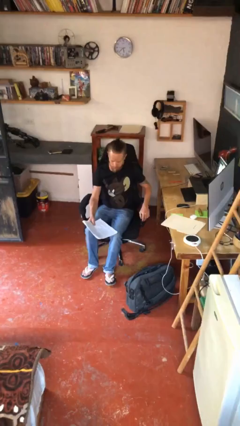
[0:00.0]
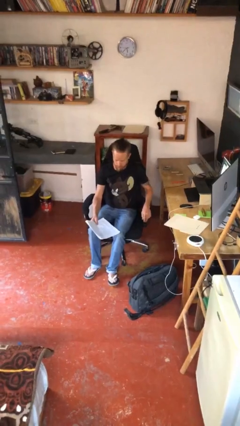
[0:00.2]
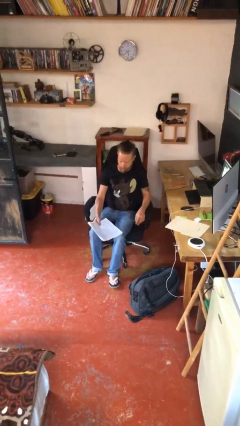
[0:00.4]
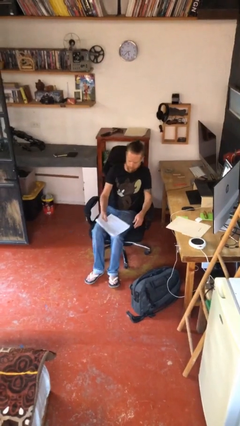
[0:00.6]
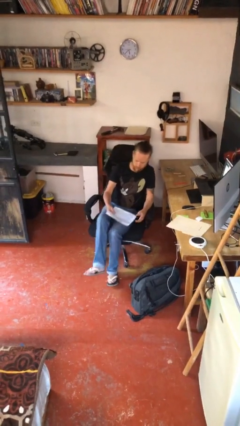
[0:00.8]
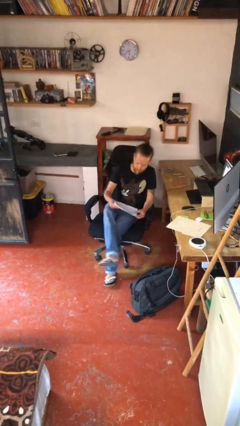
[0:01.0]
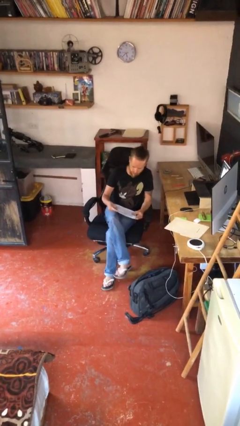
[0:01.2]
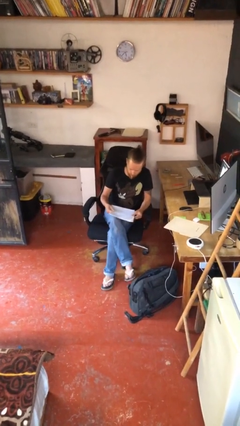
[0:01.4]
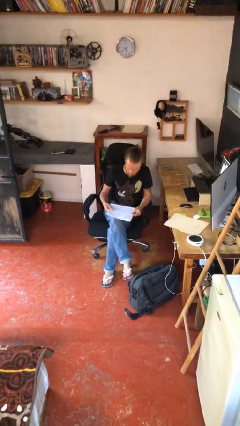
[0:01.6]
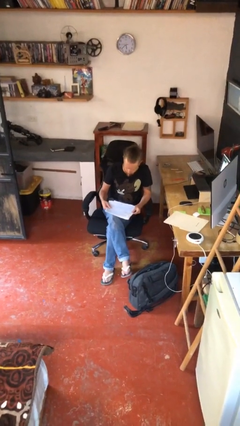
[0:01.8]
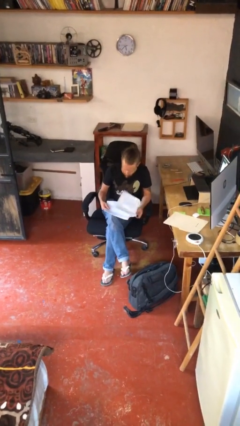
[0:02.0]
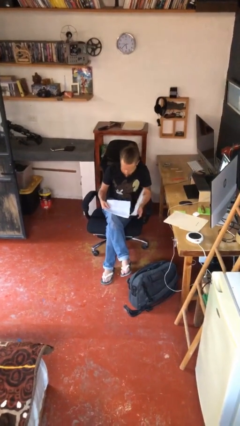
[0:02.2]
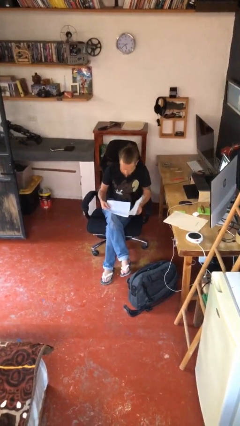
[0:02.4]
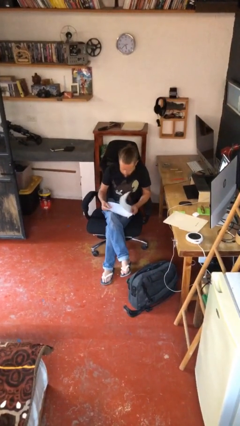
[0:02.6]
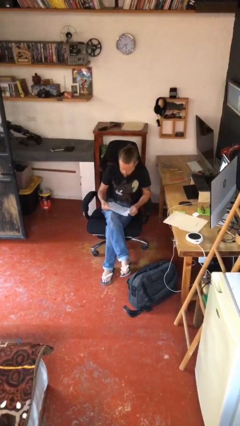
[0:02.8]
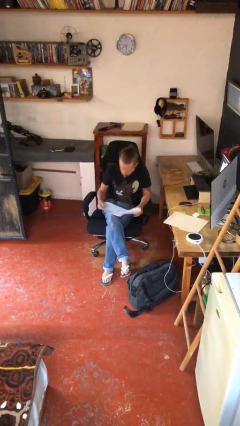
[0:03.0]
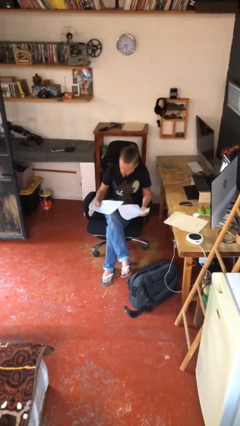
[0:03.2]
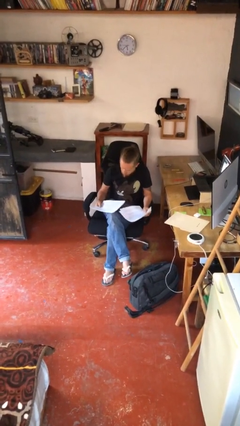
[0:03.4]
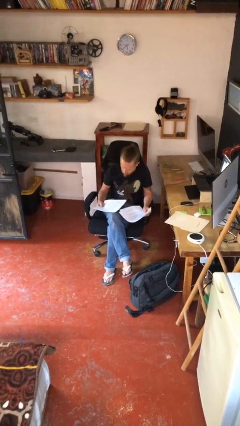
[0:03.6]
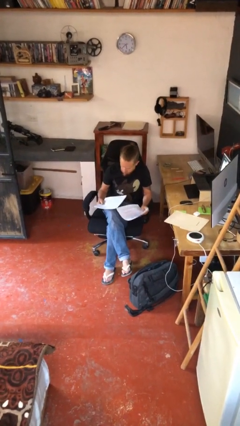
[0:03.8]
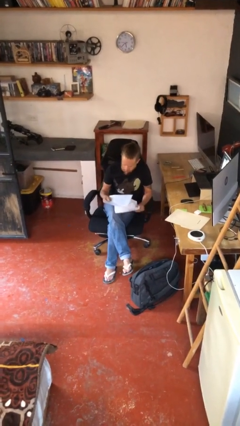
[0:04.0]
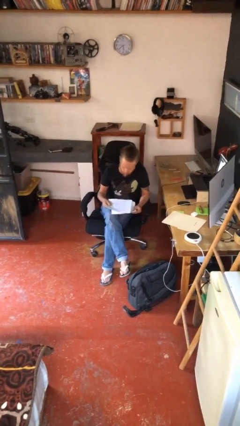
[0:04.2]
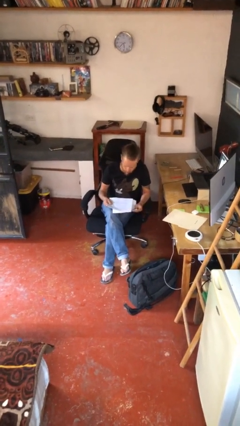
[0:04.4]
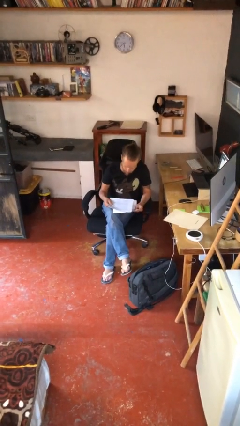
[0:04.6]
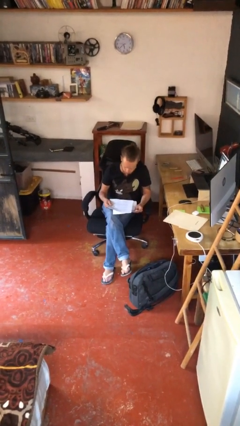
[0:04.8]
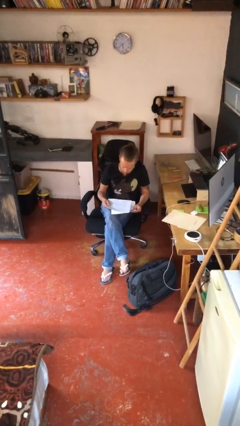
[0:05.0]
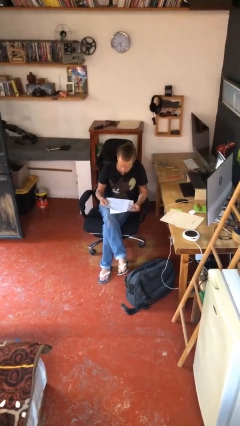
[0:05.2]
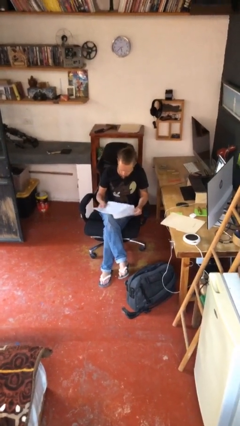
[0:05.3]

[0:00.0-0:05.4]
person reads document

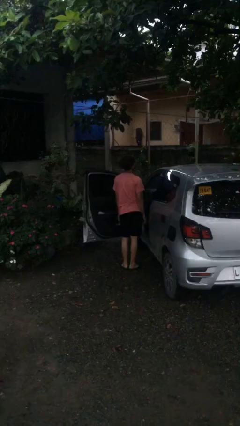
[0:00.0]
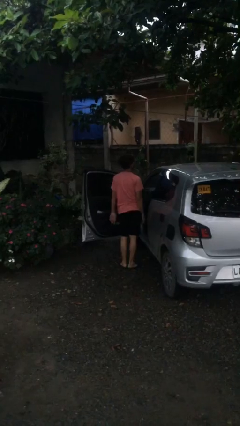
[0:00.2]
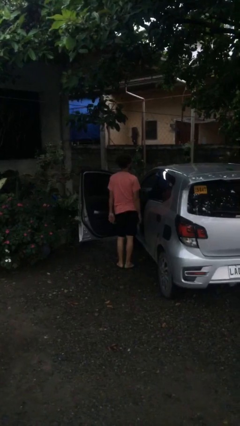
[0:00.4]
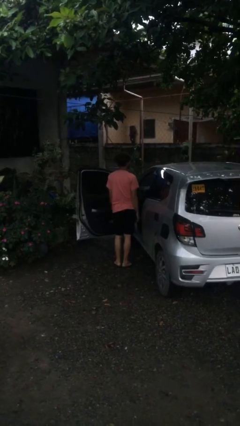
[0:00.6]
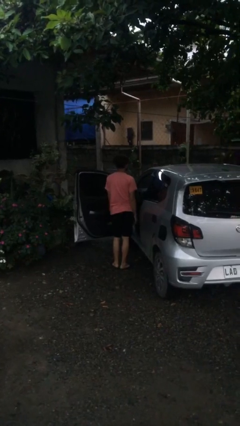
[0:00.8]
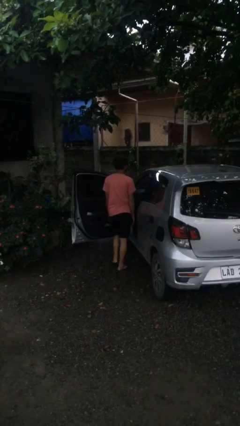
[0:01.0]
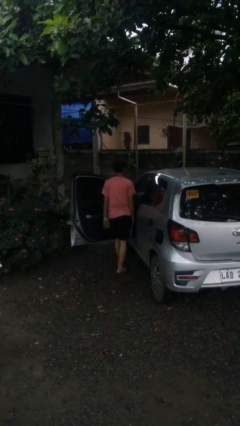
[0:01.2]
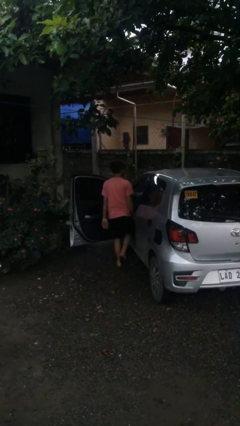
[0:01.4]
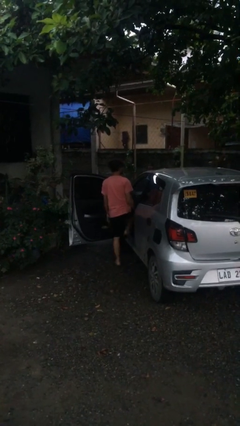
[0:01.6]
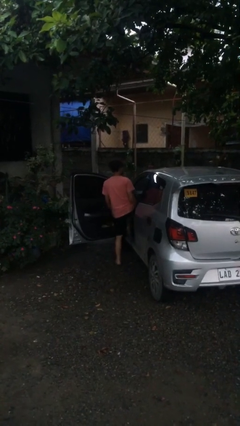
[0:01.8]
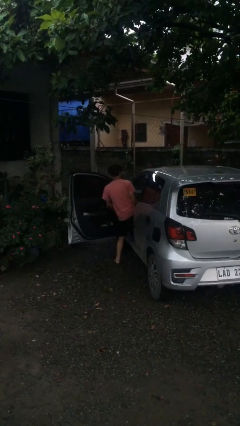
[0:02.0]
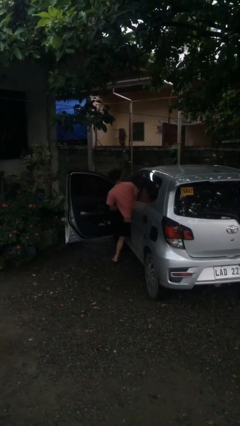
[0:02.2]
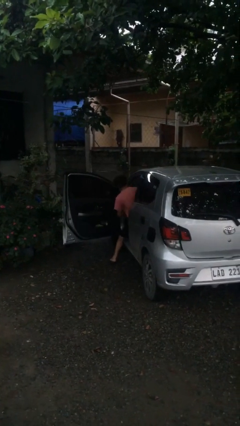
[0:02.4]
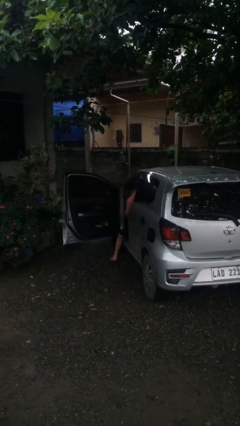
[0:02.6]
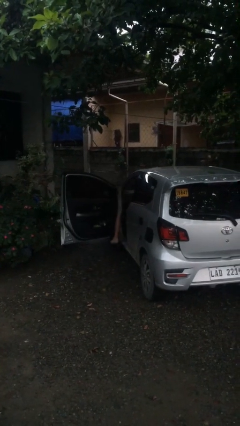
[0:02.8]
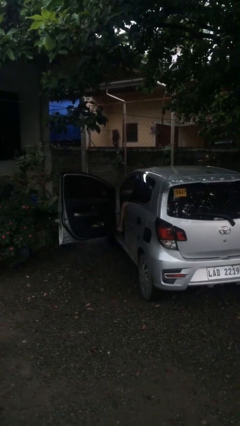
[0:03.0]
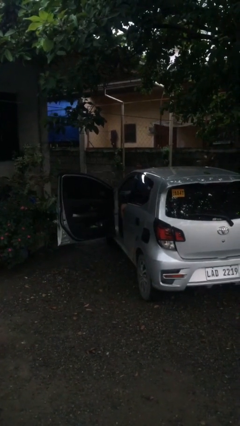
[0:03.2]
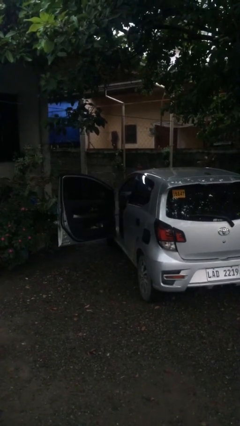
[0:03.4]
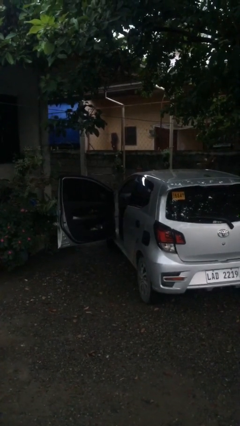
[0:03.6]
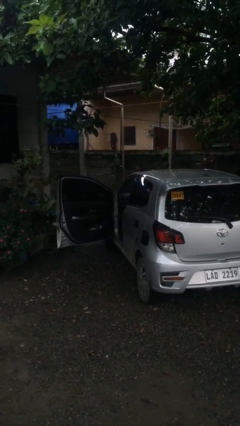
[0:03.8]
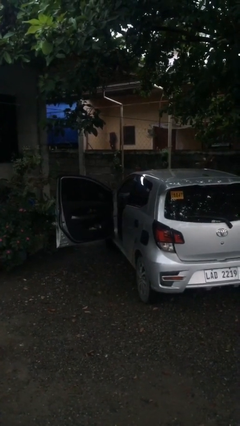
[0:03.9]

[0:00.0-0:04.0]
person enters car

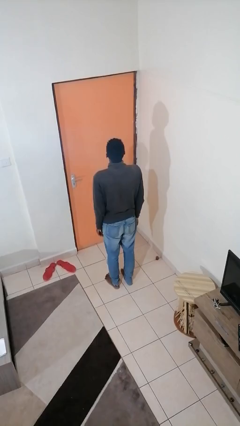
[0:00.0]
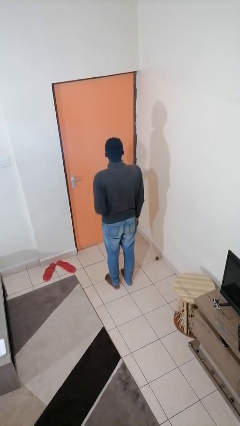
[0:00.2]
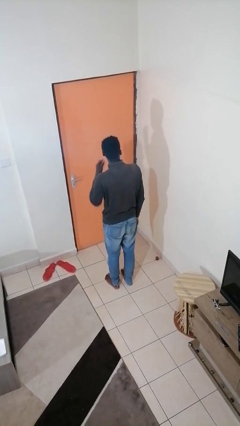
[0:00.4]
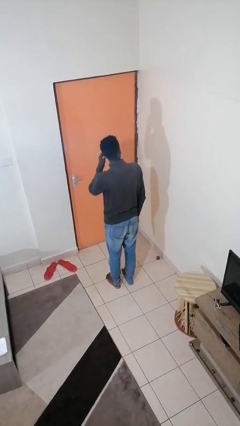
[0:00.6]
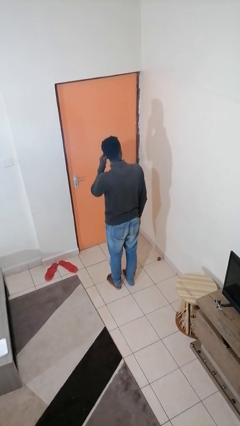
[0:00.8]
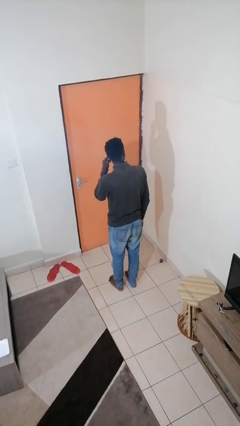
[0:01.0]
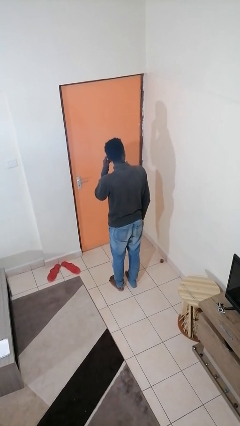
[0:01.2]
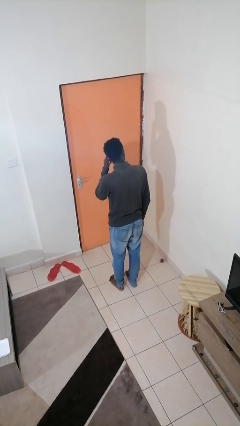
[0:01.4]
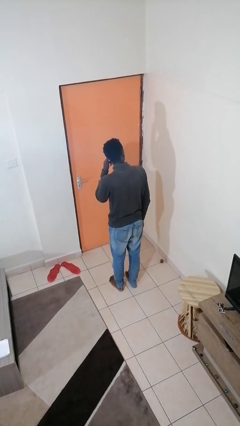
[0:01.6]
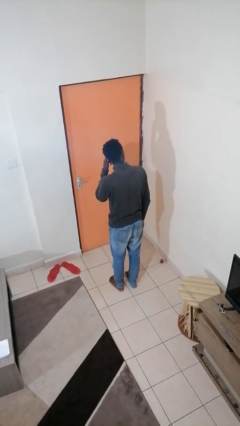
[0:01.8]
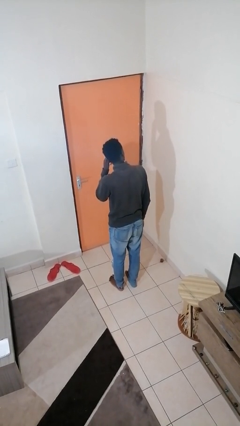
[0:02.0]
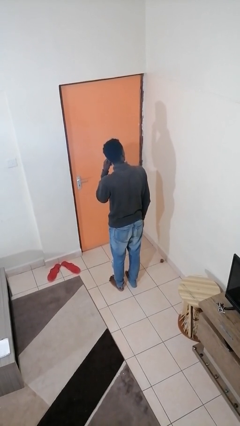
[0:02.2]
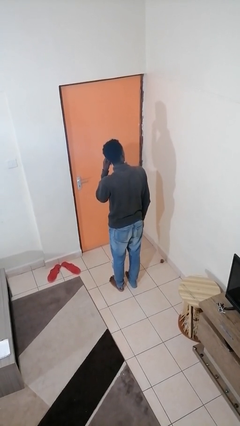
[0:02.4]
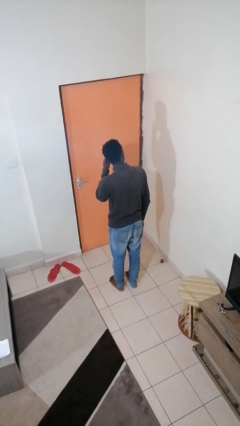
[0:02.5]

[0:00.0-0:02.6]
person touches earlobe

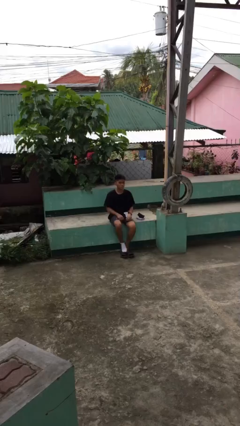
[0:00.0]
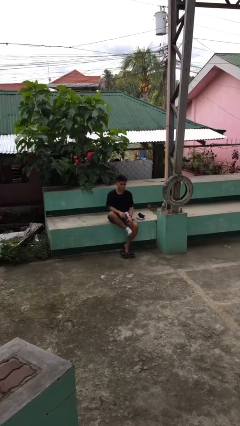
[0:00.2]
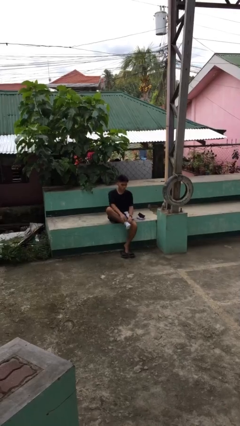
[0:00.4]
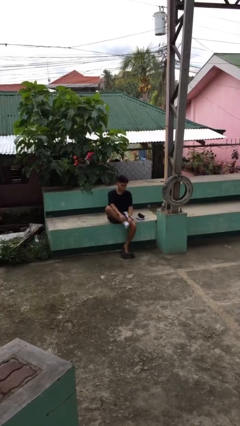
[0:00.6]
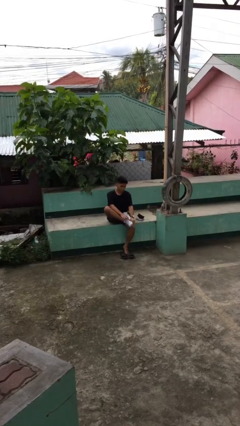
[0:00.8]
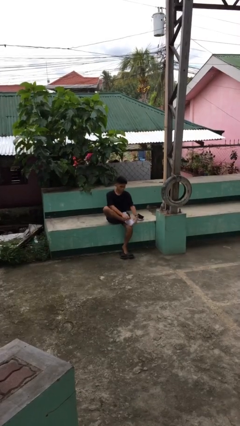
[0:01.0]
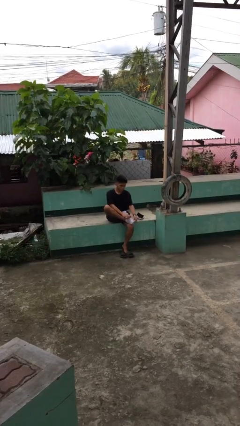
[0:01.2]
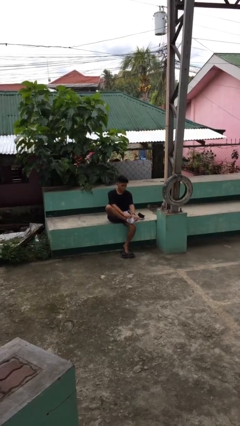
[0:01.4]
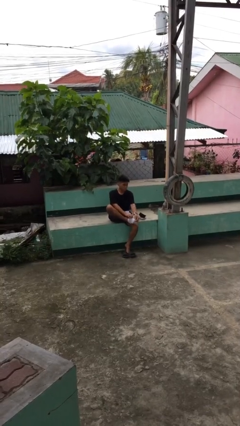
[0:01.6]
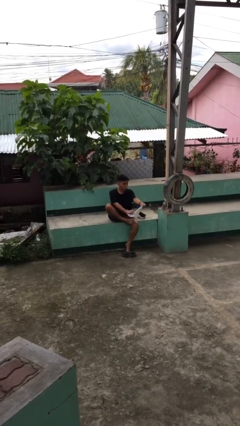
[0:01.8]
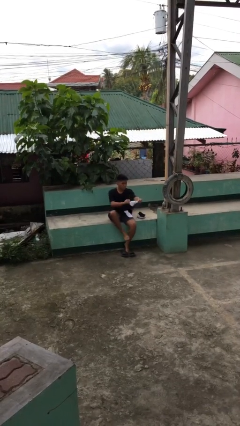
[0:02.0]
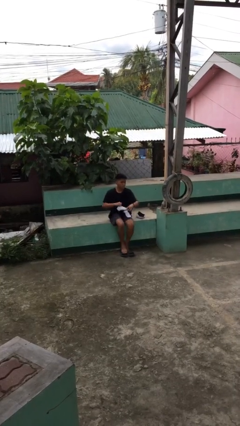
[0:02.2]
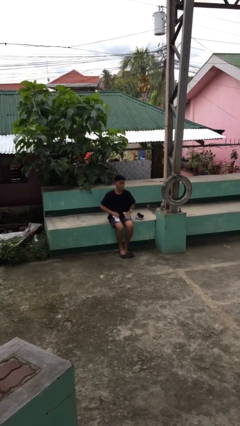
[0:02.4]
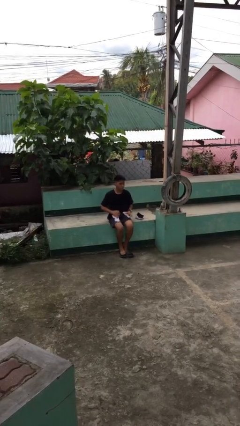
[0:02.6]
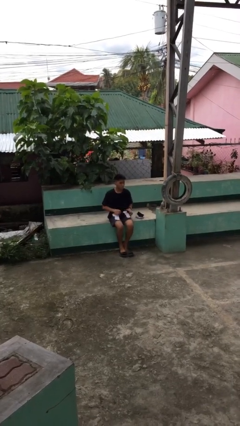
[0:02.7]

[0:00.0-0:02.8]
person takes off socks

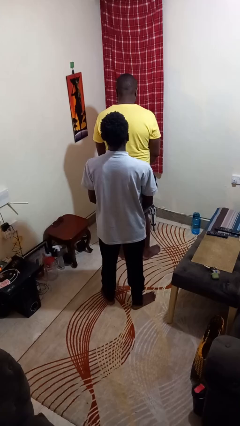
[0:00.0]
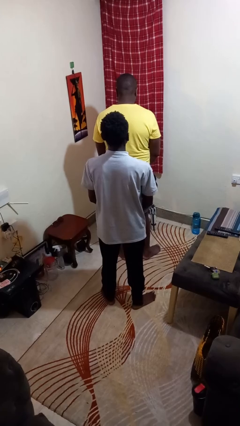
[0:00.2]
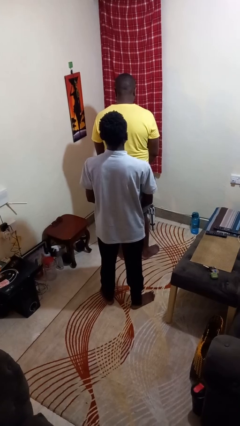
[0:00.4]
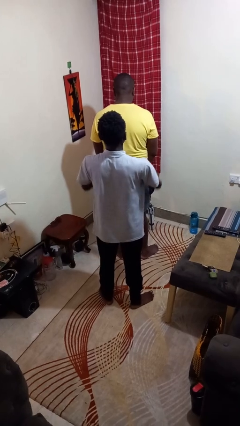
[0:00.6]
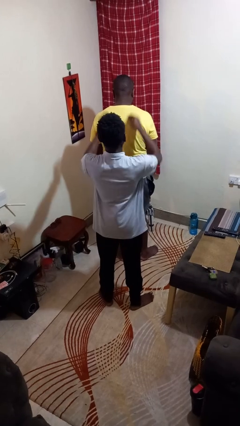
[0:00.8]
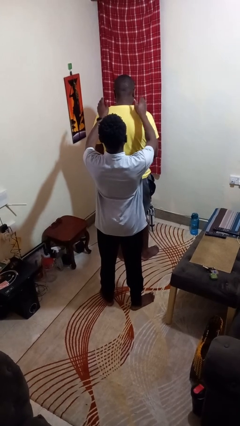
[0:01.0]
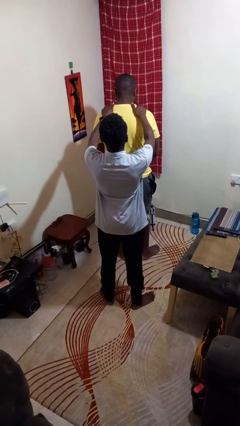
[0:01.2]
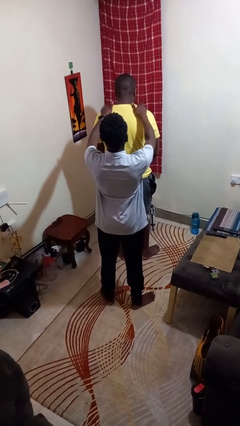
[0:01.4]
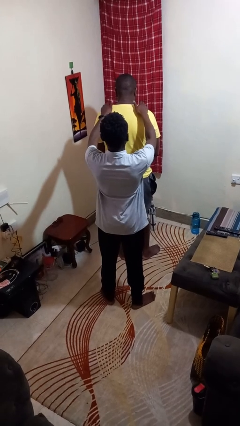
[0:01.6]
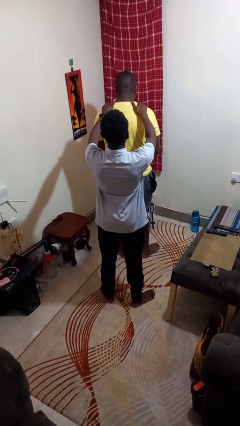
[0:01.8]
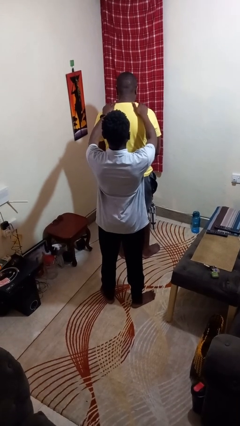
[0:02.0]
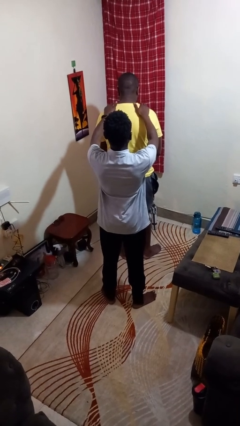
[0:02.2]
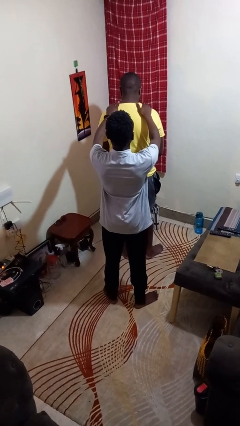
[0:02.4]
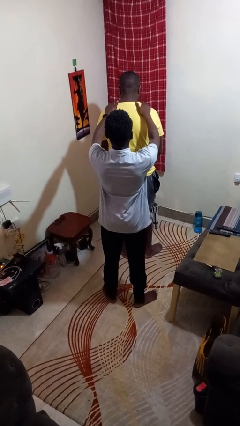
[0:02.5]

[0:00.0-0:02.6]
person pounds shoulders of person

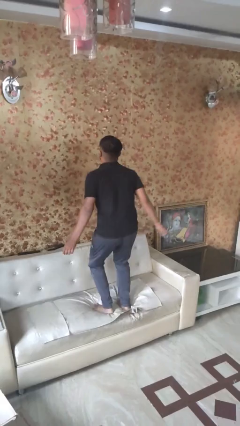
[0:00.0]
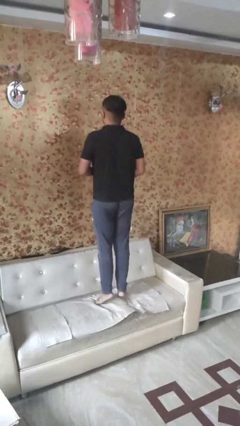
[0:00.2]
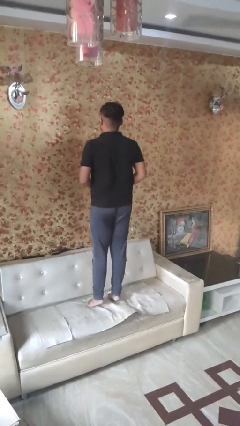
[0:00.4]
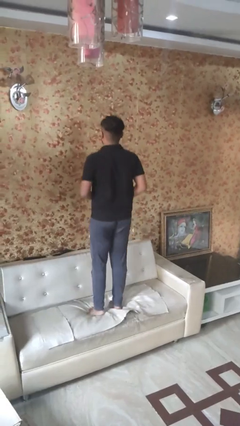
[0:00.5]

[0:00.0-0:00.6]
person jumps on bed
